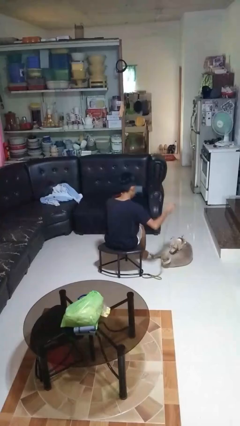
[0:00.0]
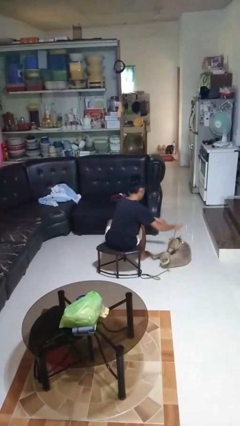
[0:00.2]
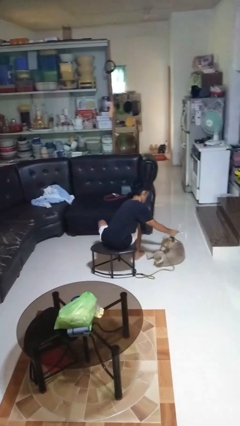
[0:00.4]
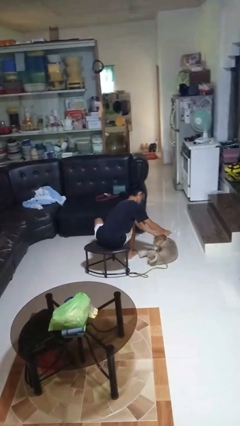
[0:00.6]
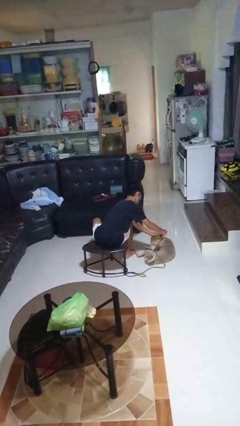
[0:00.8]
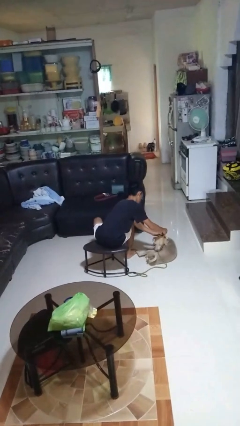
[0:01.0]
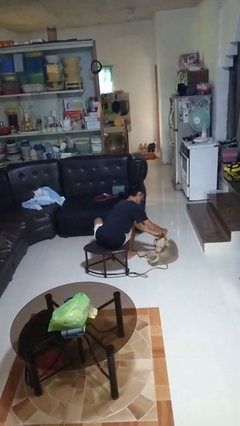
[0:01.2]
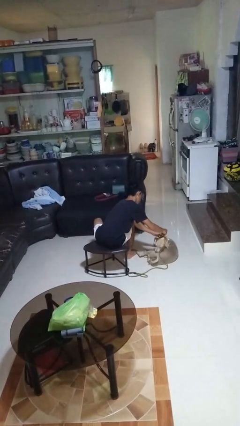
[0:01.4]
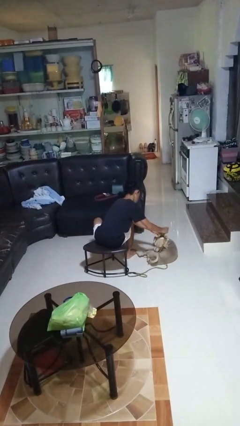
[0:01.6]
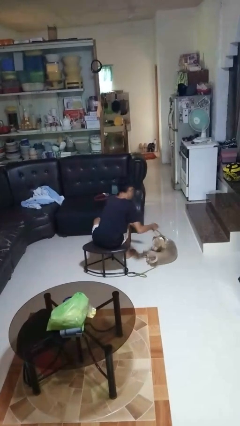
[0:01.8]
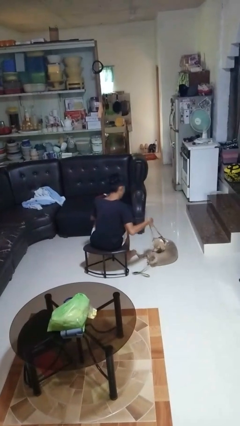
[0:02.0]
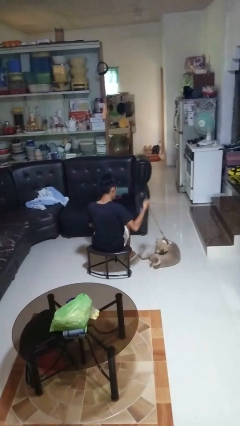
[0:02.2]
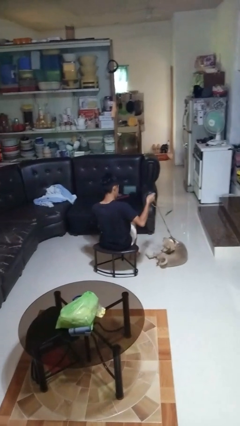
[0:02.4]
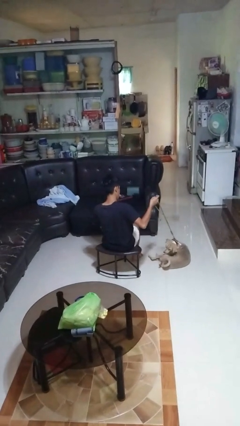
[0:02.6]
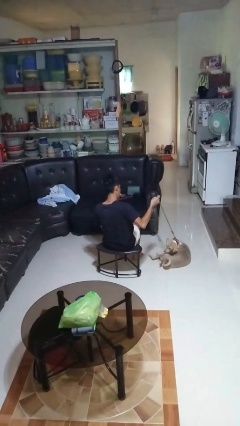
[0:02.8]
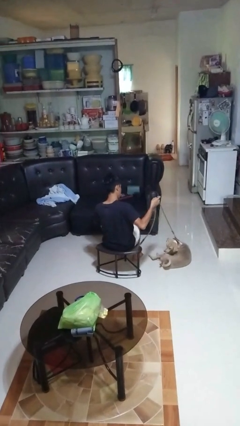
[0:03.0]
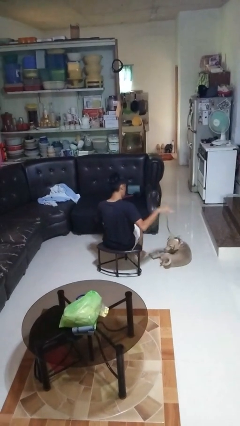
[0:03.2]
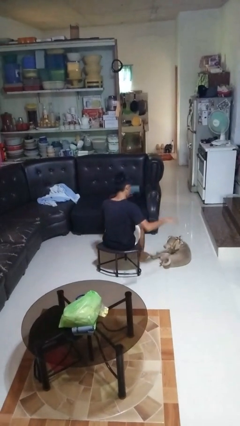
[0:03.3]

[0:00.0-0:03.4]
person attaches leash to dog

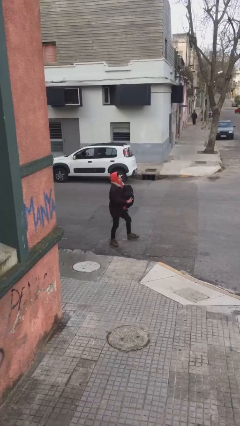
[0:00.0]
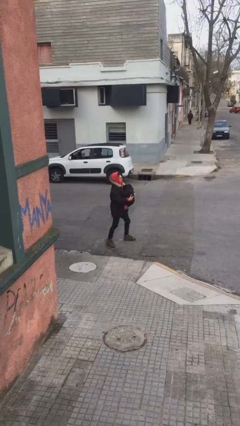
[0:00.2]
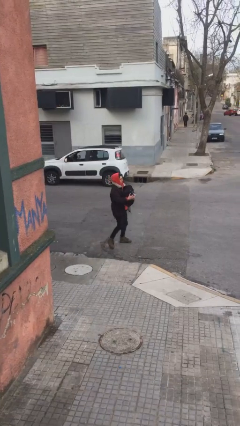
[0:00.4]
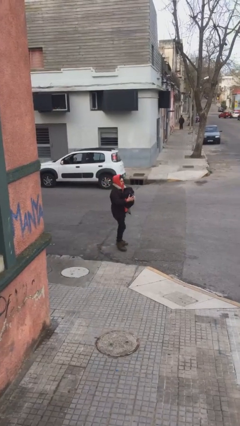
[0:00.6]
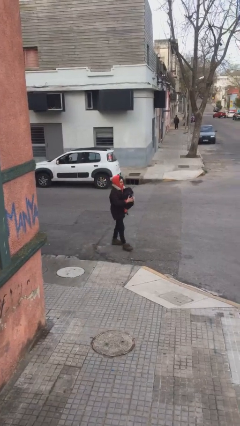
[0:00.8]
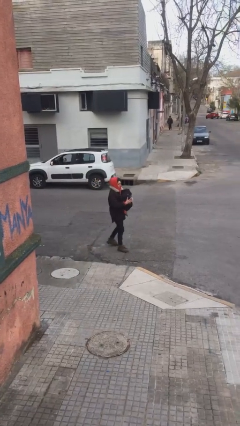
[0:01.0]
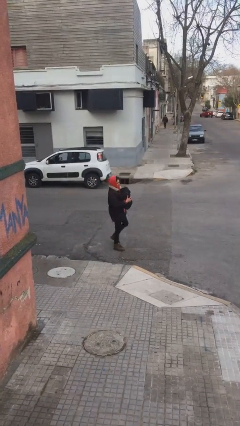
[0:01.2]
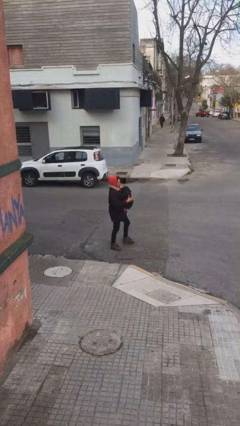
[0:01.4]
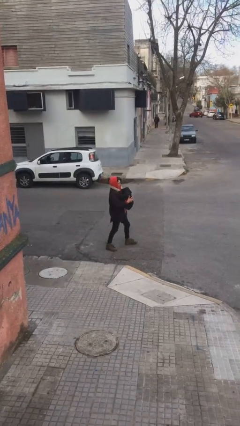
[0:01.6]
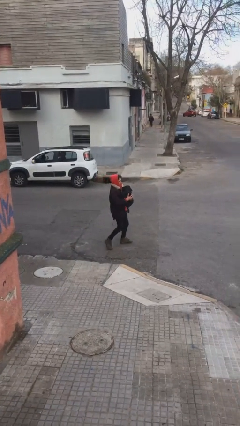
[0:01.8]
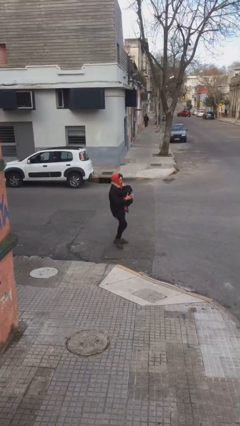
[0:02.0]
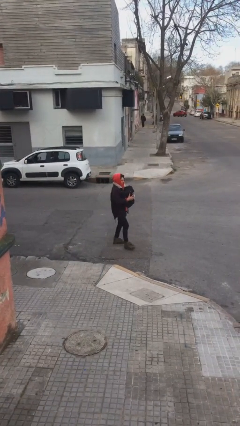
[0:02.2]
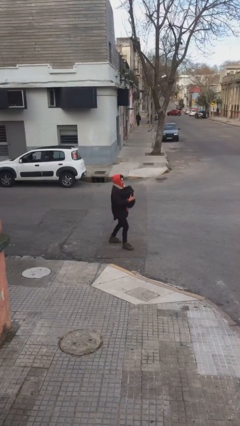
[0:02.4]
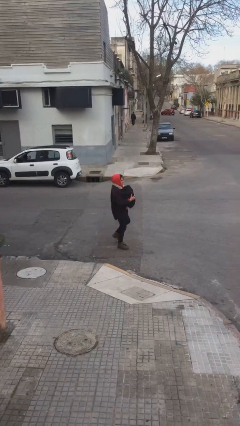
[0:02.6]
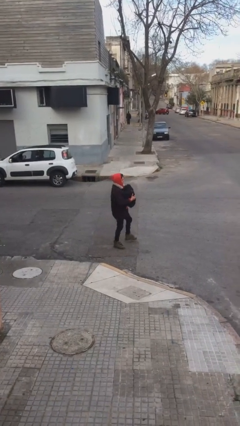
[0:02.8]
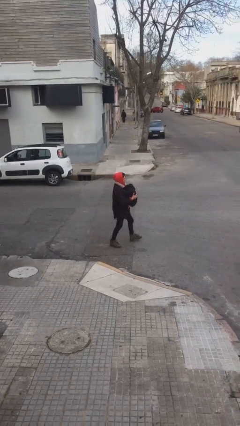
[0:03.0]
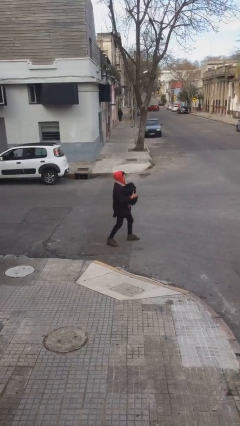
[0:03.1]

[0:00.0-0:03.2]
person carries heavy object

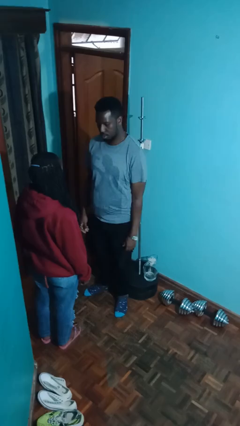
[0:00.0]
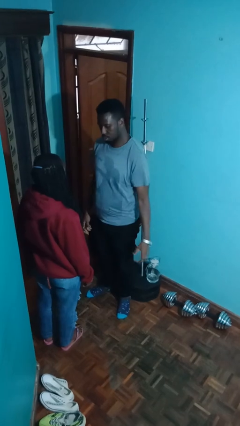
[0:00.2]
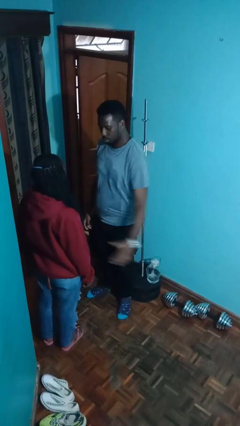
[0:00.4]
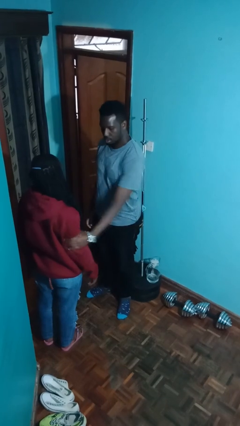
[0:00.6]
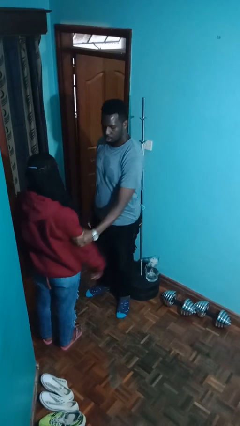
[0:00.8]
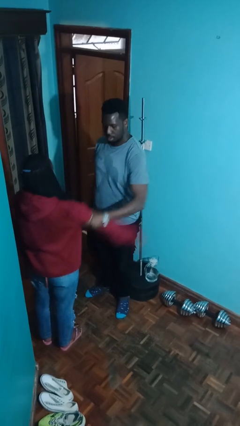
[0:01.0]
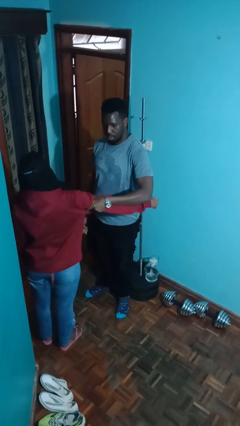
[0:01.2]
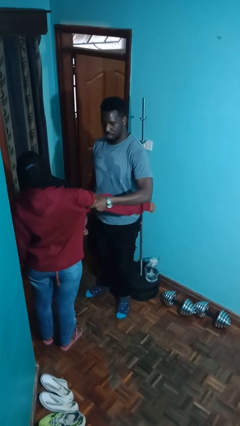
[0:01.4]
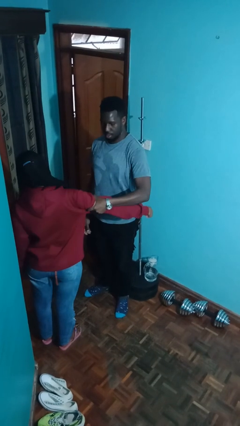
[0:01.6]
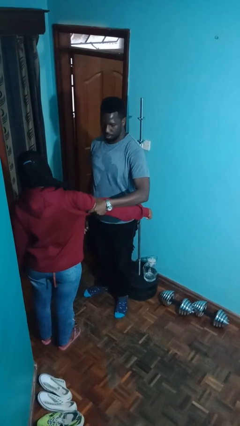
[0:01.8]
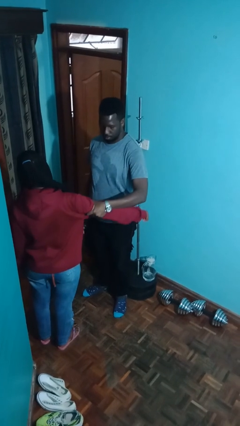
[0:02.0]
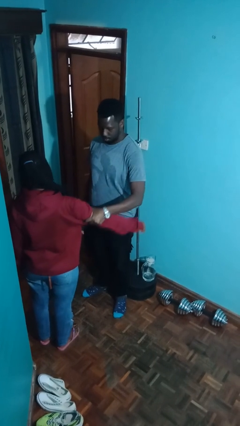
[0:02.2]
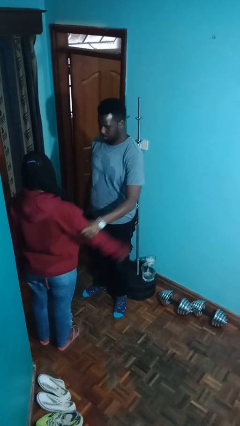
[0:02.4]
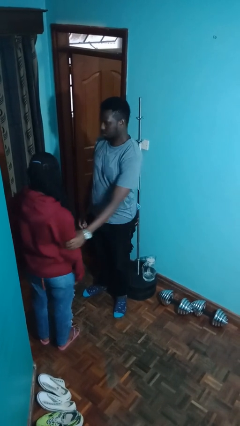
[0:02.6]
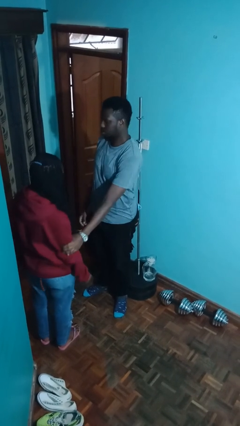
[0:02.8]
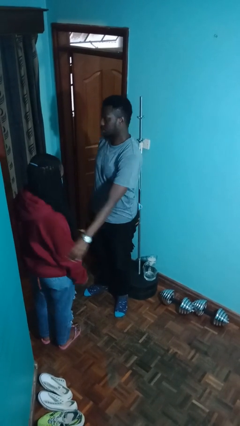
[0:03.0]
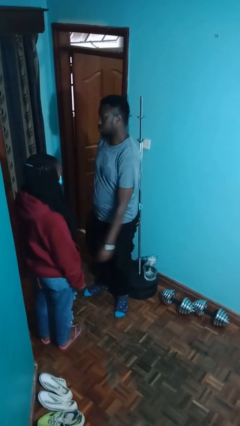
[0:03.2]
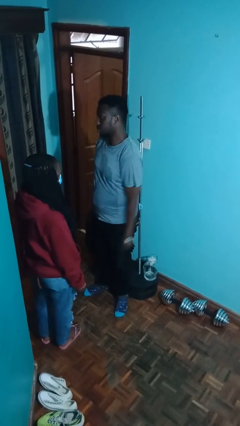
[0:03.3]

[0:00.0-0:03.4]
person grabs person by bicep

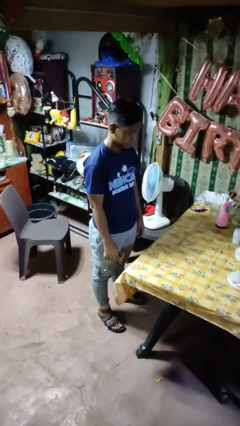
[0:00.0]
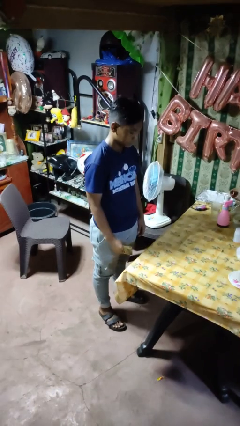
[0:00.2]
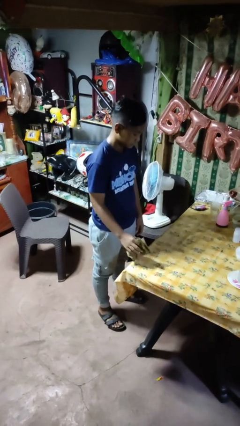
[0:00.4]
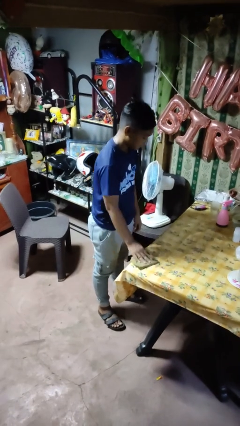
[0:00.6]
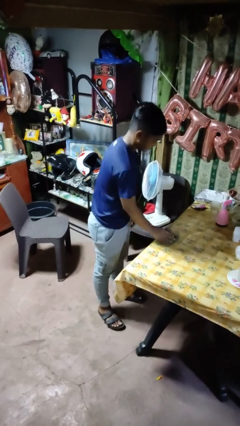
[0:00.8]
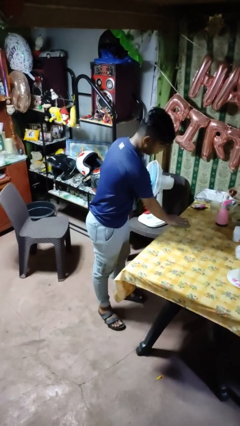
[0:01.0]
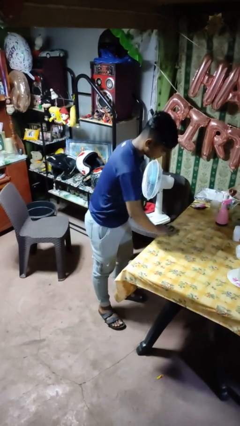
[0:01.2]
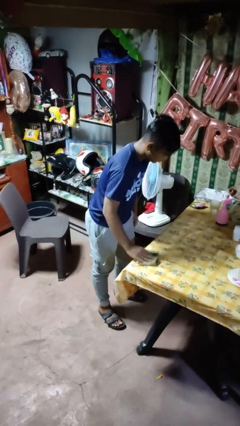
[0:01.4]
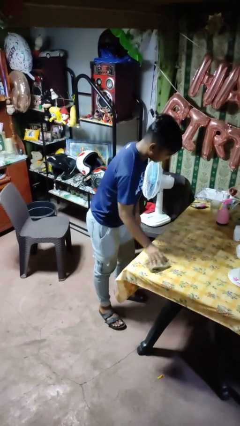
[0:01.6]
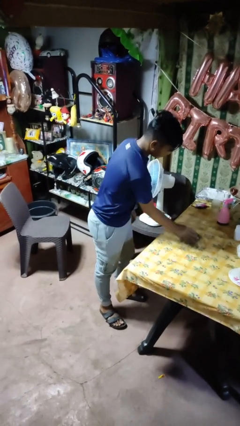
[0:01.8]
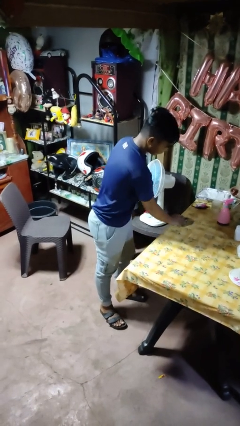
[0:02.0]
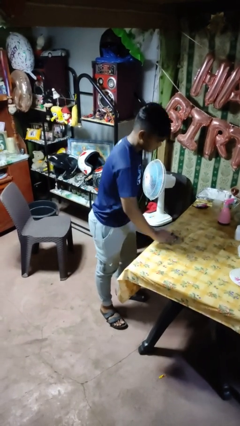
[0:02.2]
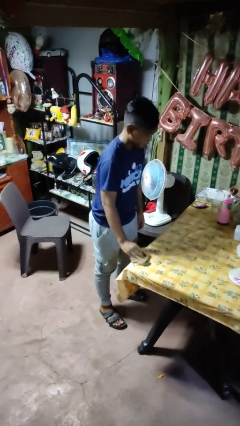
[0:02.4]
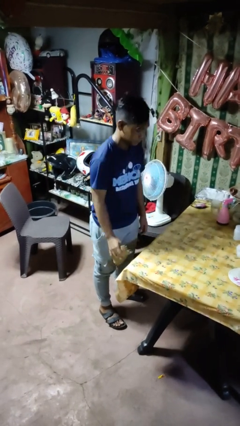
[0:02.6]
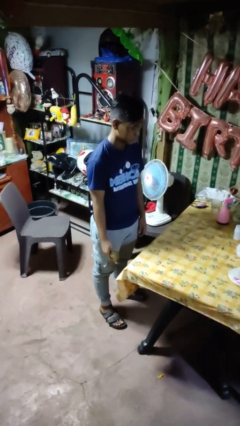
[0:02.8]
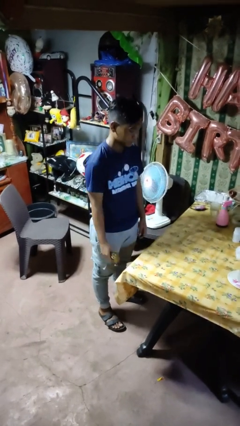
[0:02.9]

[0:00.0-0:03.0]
person cleans table with rag

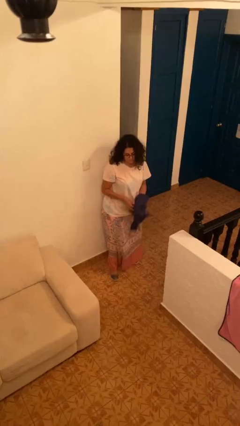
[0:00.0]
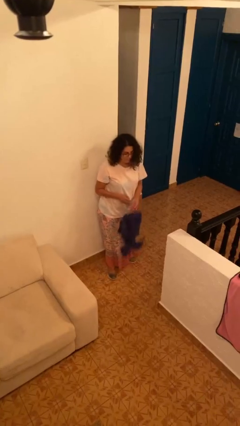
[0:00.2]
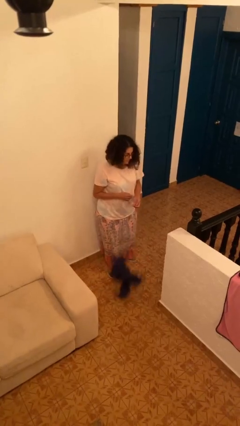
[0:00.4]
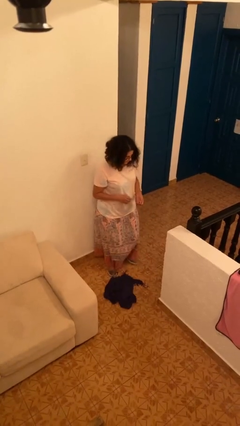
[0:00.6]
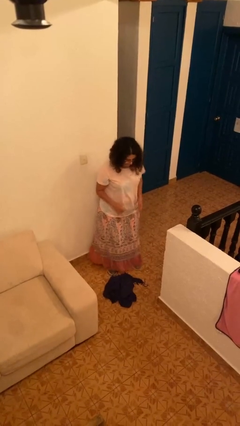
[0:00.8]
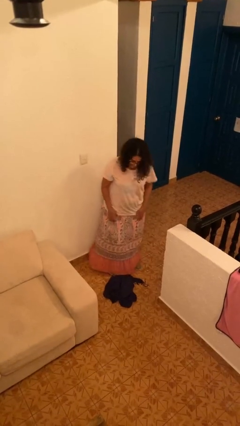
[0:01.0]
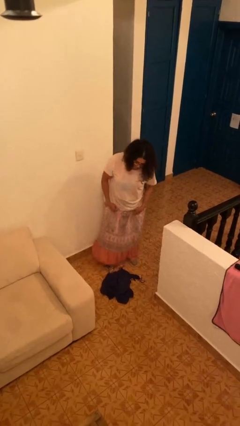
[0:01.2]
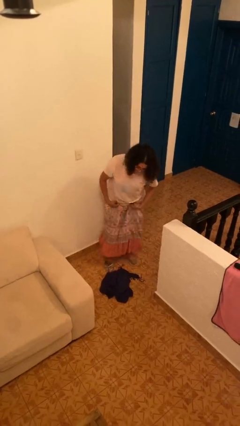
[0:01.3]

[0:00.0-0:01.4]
person drops object

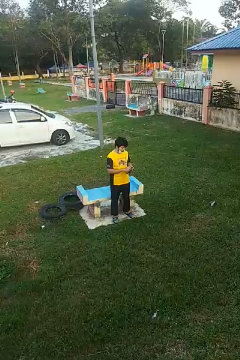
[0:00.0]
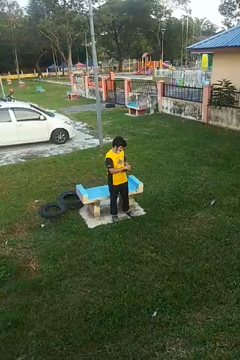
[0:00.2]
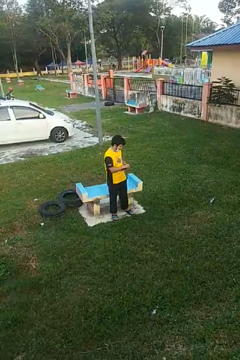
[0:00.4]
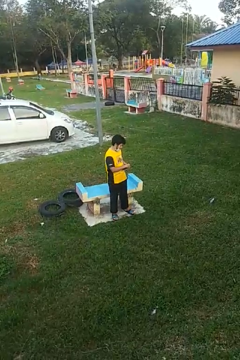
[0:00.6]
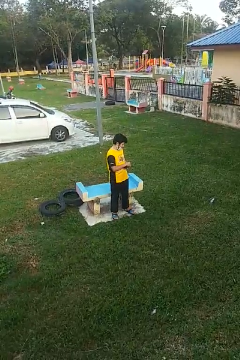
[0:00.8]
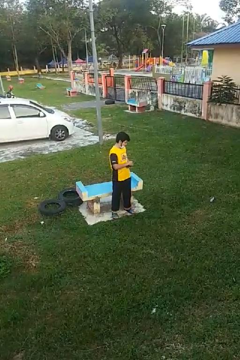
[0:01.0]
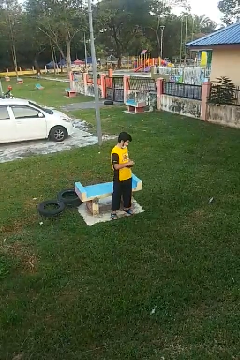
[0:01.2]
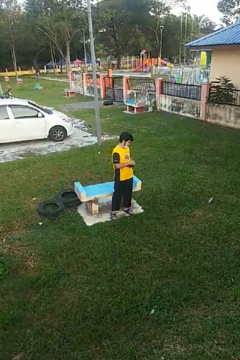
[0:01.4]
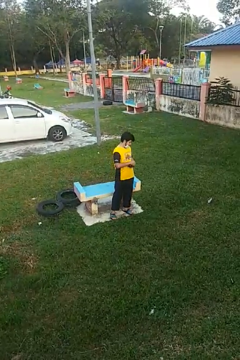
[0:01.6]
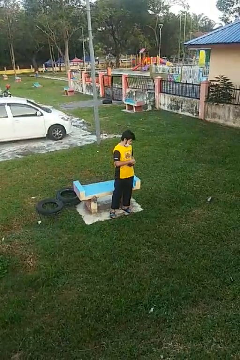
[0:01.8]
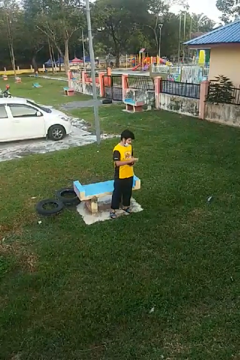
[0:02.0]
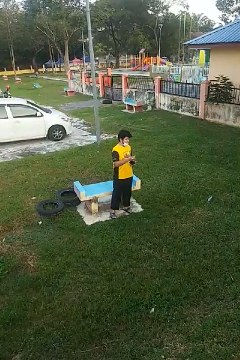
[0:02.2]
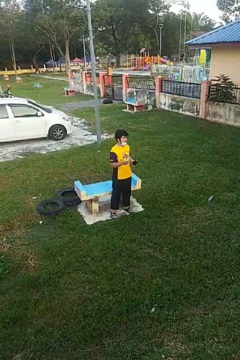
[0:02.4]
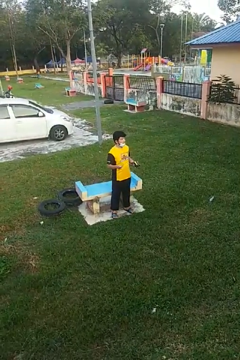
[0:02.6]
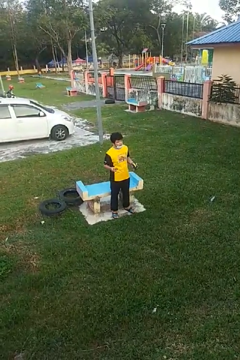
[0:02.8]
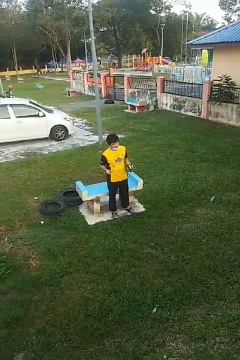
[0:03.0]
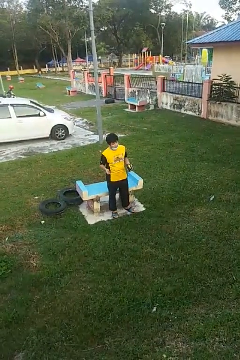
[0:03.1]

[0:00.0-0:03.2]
person takes object from purse

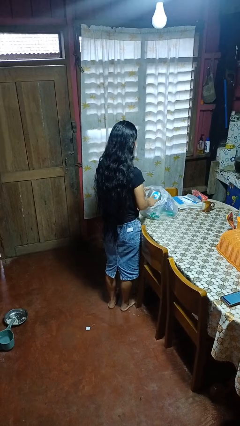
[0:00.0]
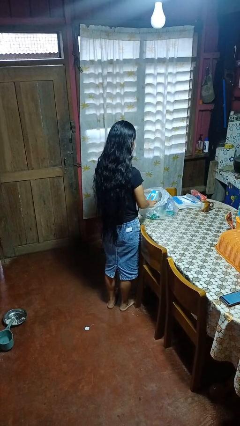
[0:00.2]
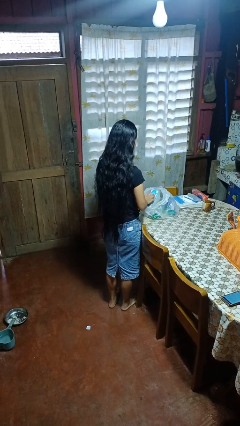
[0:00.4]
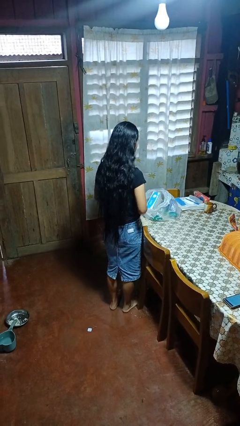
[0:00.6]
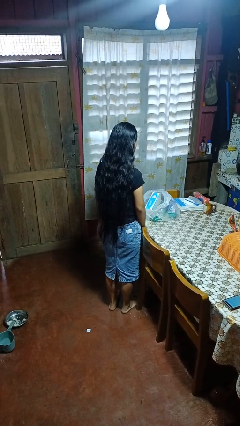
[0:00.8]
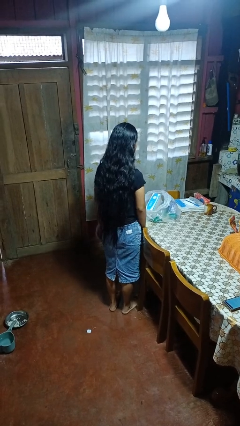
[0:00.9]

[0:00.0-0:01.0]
person puts object into bag
